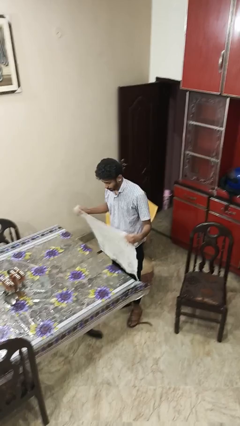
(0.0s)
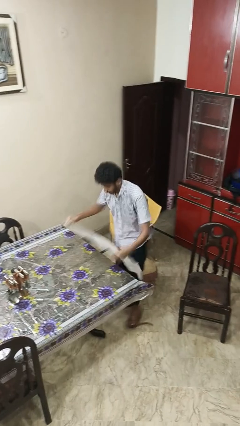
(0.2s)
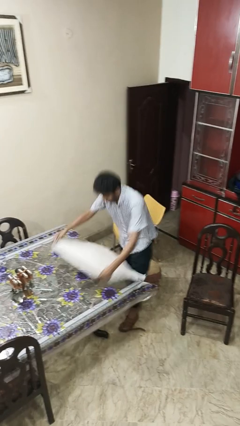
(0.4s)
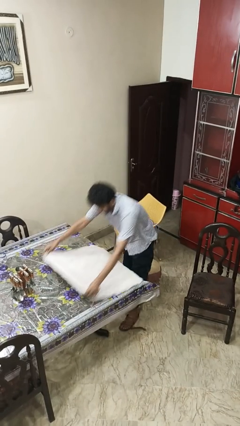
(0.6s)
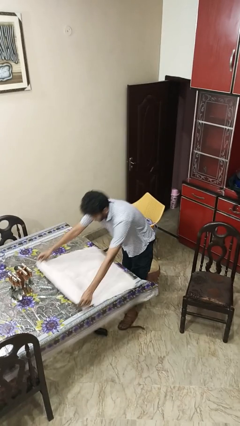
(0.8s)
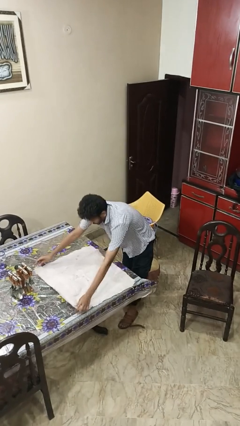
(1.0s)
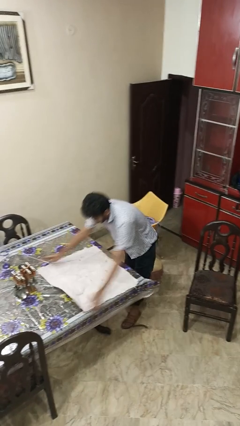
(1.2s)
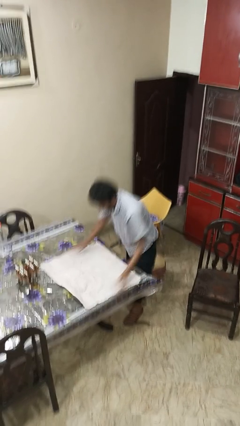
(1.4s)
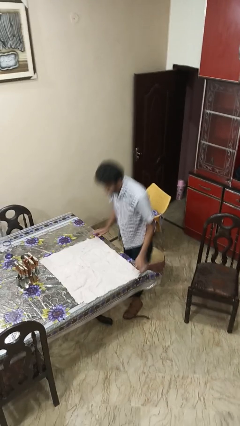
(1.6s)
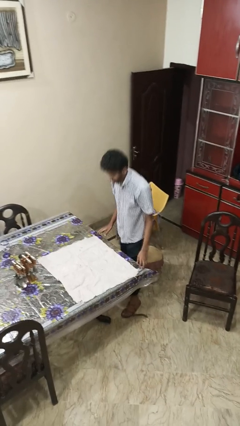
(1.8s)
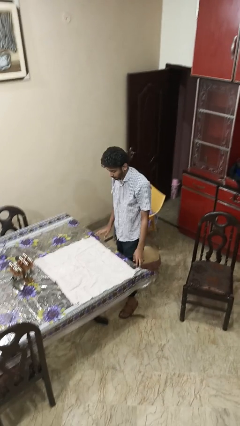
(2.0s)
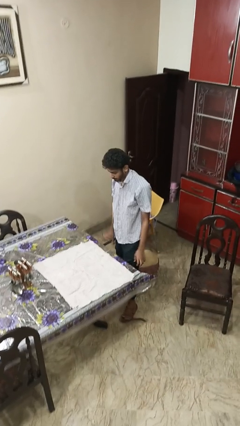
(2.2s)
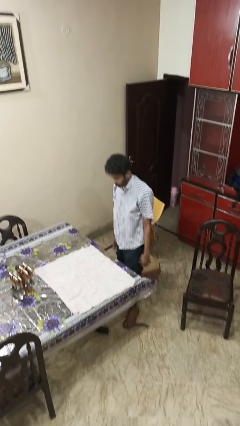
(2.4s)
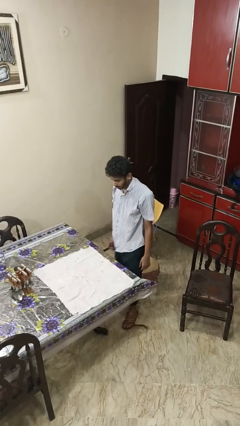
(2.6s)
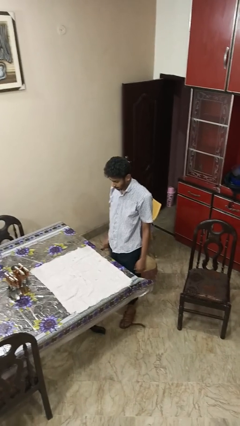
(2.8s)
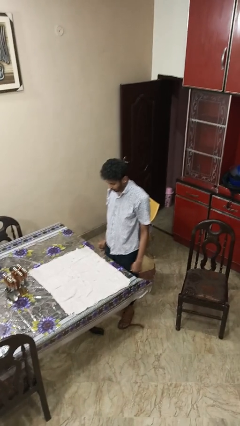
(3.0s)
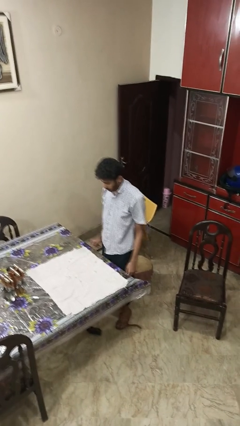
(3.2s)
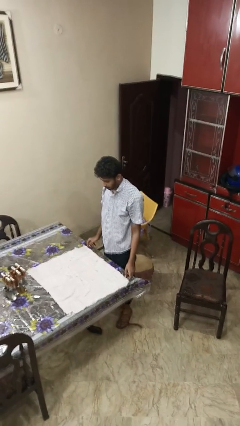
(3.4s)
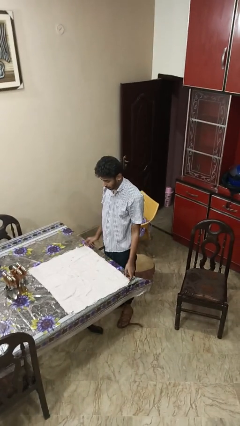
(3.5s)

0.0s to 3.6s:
person spreads tablecloth

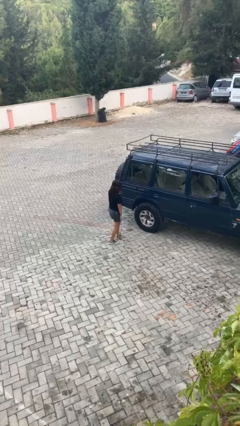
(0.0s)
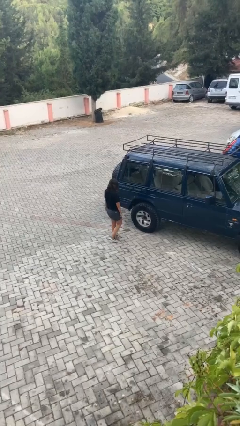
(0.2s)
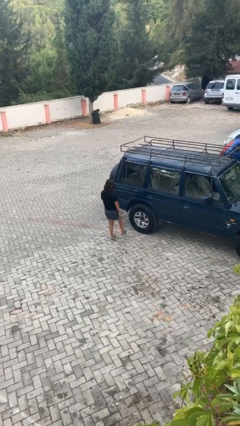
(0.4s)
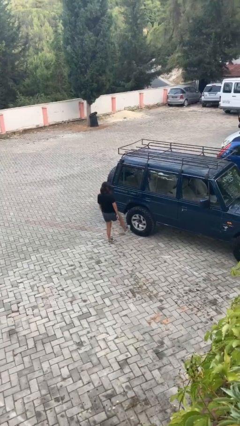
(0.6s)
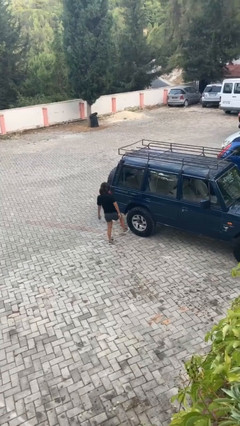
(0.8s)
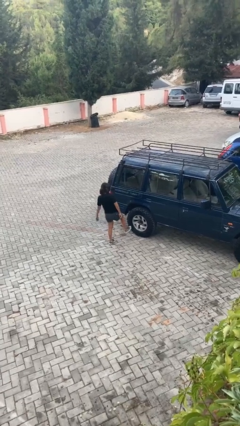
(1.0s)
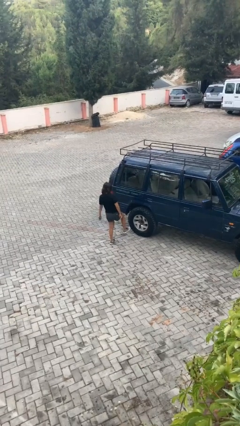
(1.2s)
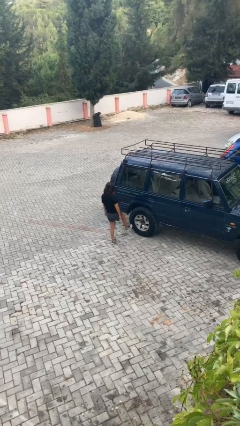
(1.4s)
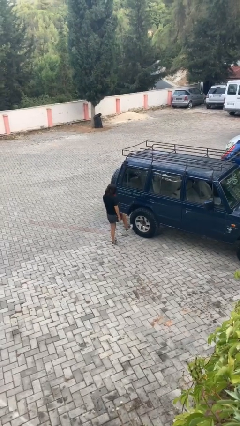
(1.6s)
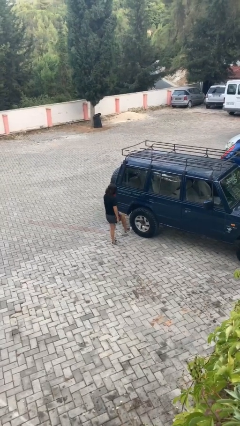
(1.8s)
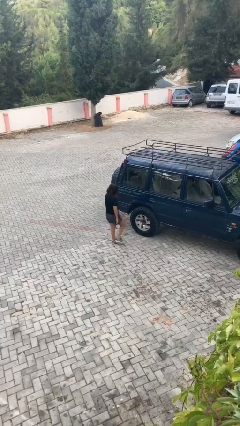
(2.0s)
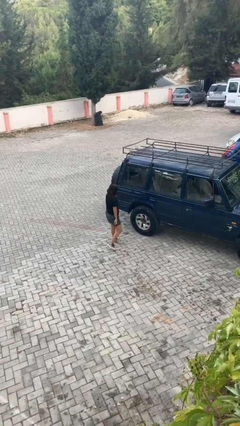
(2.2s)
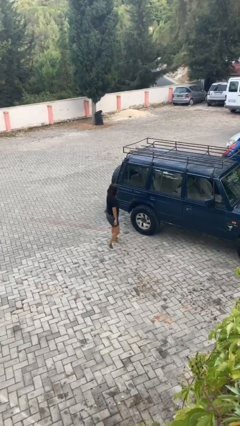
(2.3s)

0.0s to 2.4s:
person kicks car tires

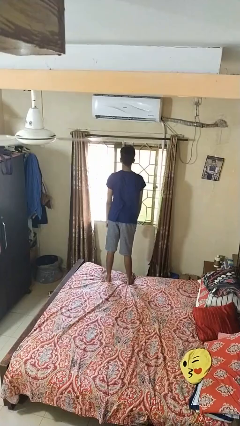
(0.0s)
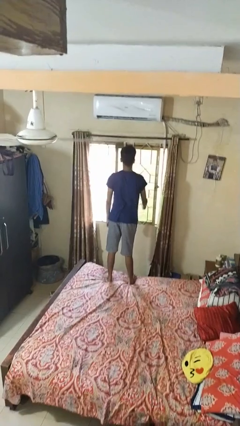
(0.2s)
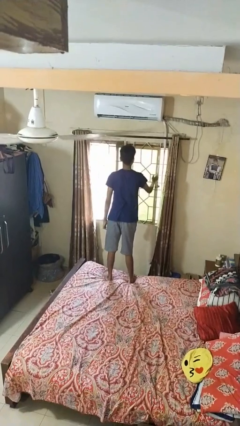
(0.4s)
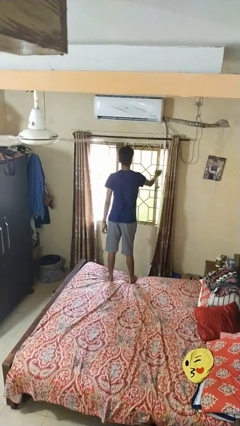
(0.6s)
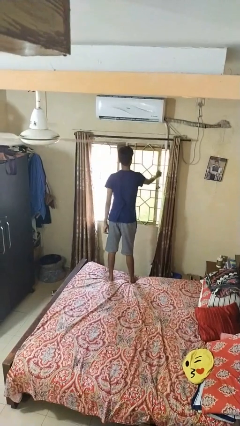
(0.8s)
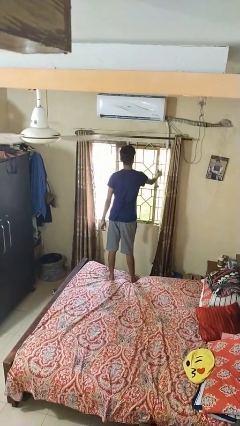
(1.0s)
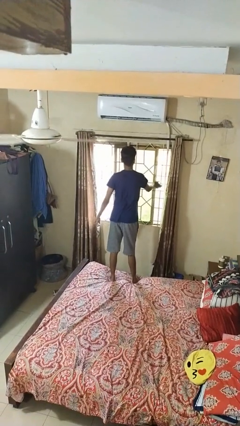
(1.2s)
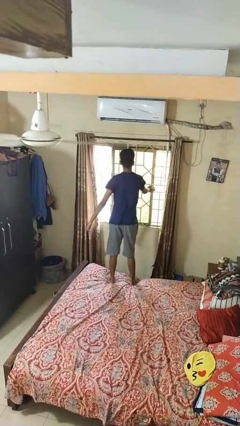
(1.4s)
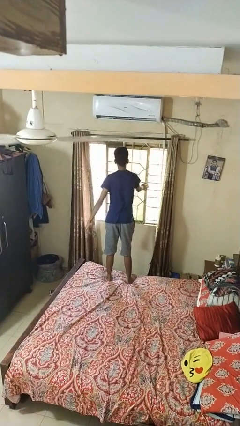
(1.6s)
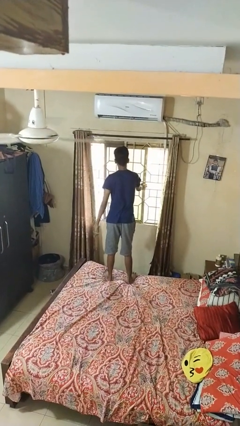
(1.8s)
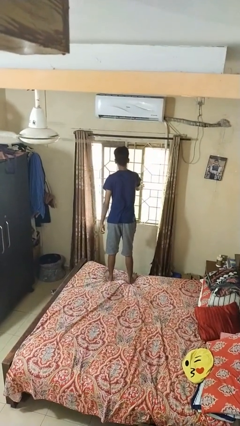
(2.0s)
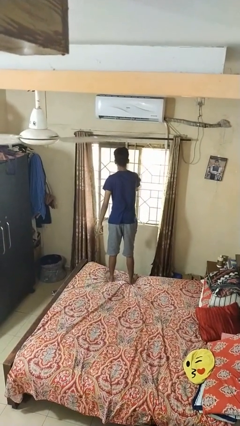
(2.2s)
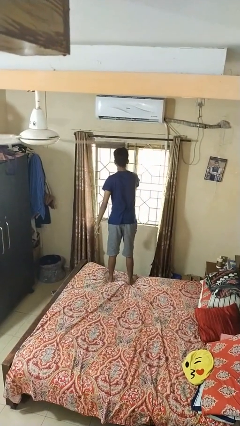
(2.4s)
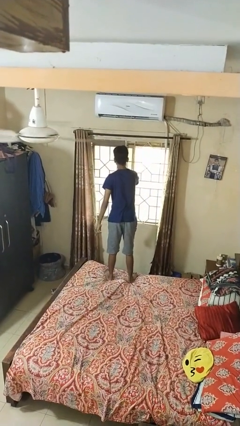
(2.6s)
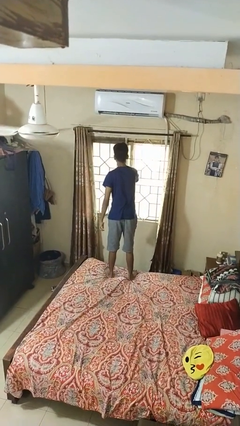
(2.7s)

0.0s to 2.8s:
person closes home window

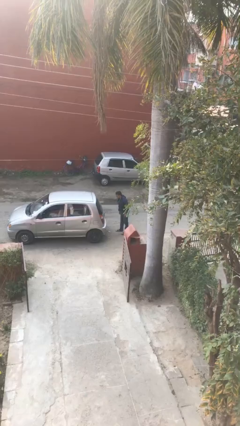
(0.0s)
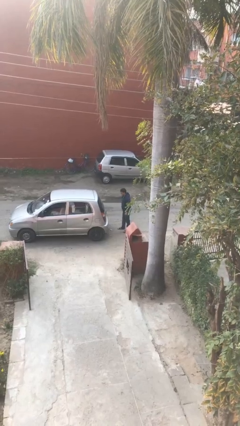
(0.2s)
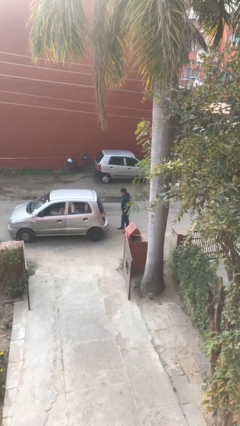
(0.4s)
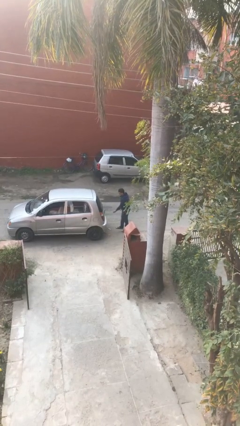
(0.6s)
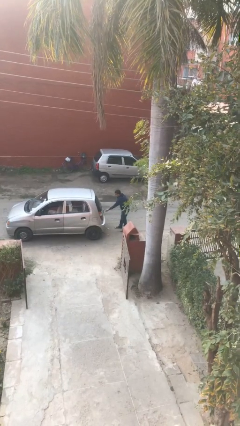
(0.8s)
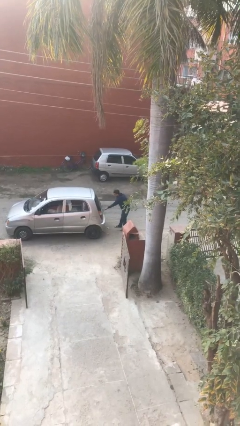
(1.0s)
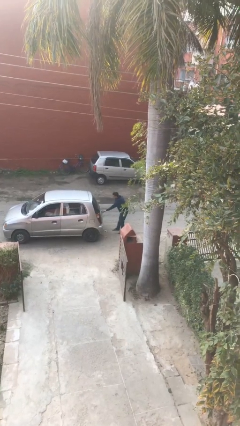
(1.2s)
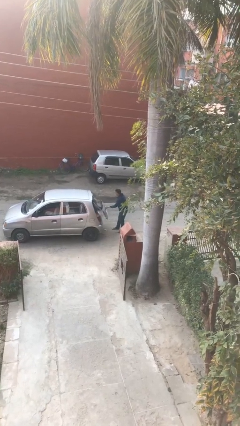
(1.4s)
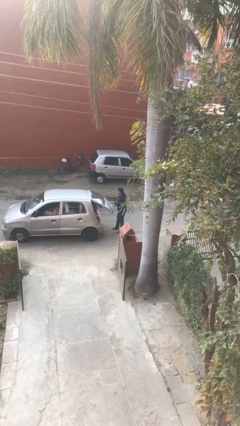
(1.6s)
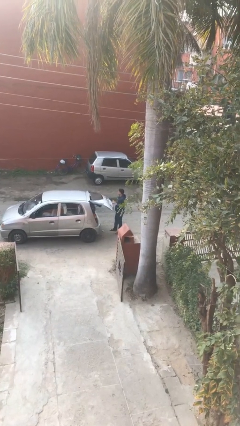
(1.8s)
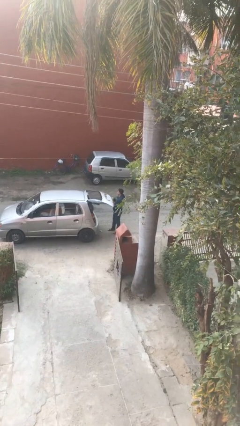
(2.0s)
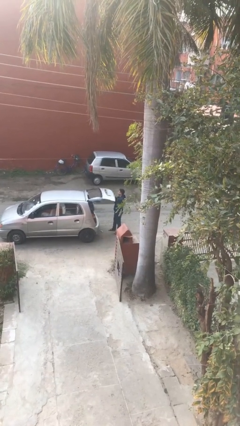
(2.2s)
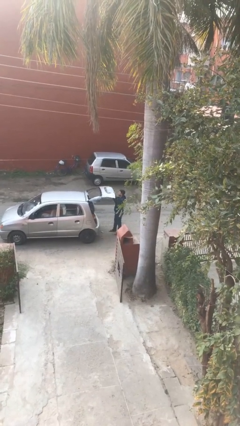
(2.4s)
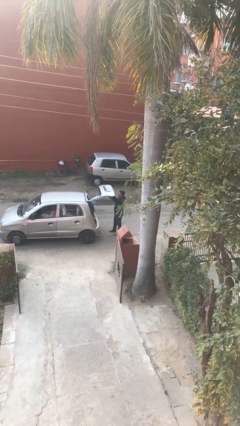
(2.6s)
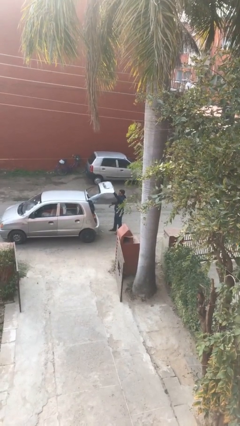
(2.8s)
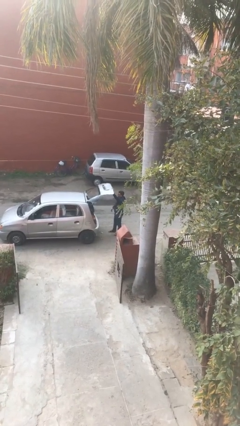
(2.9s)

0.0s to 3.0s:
person opens car trunk

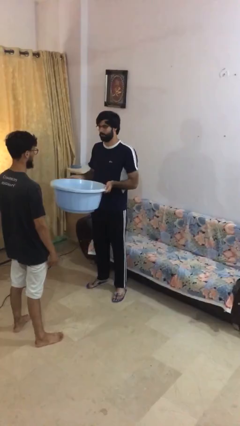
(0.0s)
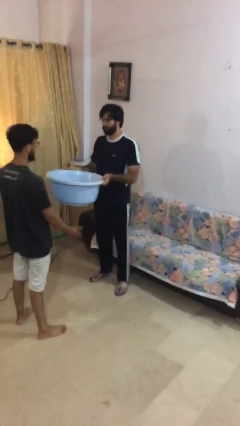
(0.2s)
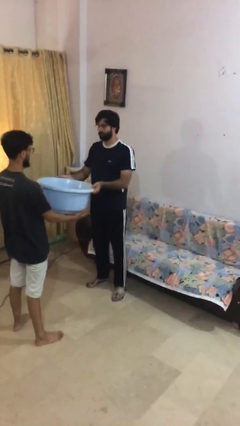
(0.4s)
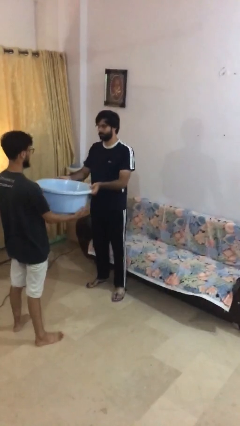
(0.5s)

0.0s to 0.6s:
person transfers object to person

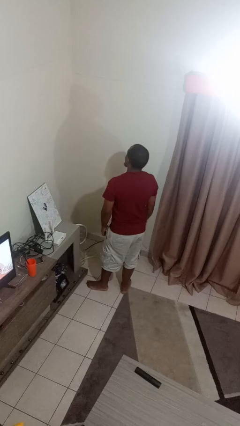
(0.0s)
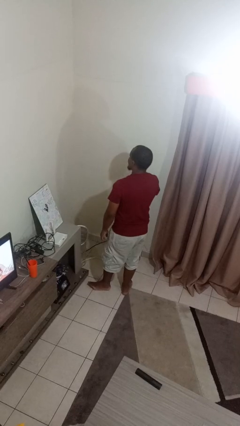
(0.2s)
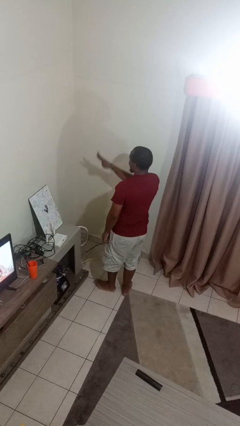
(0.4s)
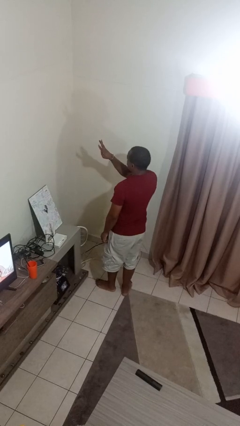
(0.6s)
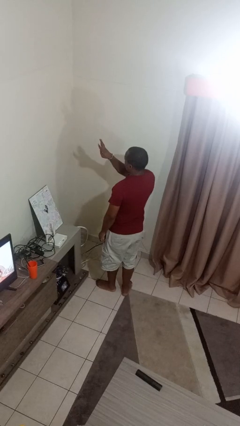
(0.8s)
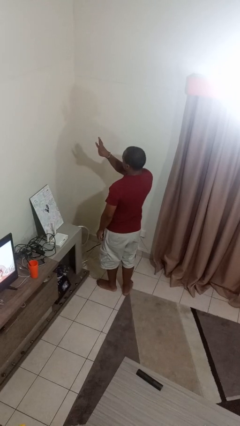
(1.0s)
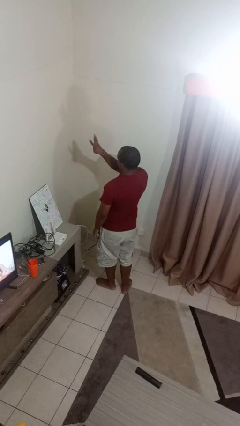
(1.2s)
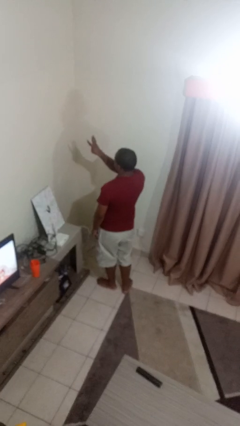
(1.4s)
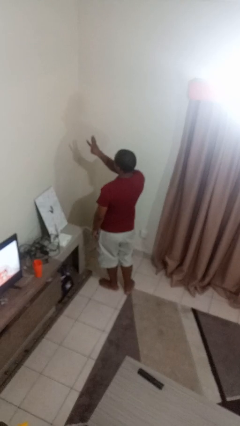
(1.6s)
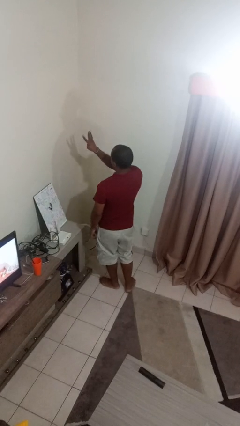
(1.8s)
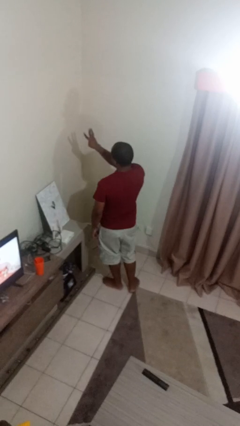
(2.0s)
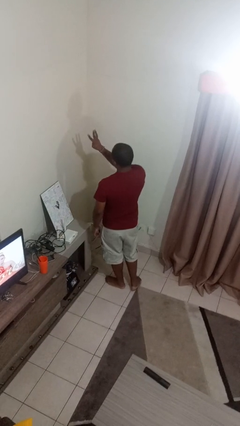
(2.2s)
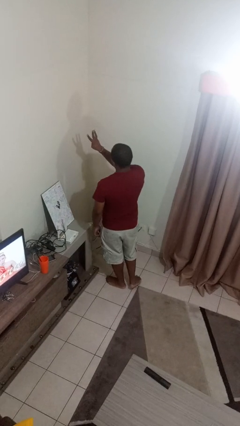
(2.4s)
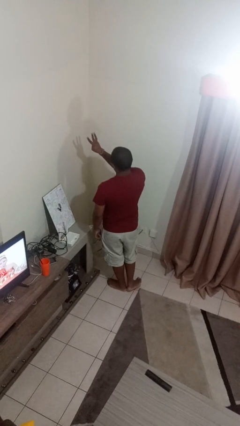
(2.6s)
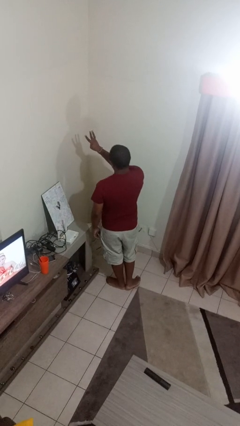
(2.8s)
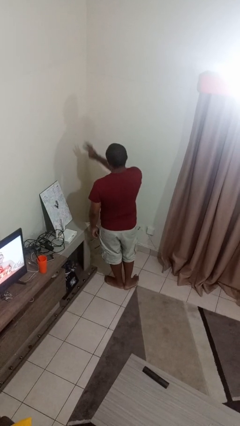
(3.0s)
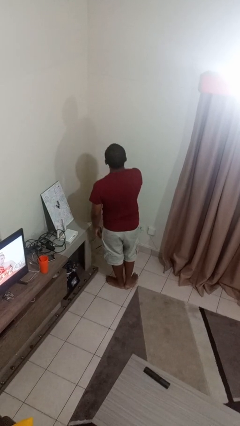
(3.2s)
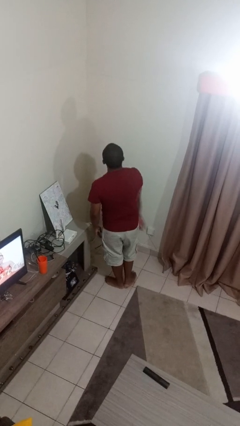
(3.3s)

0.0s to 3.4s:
person gestures number three

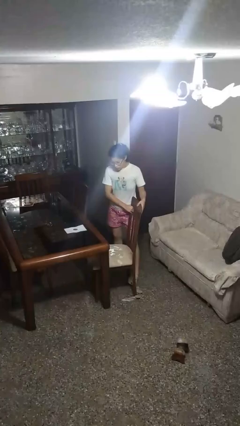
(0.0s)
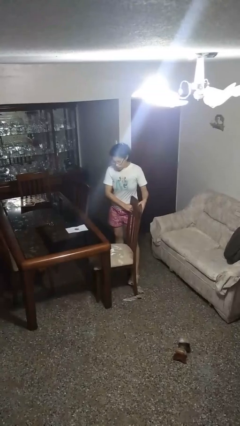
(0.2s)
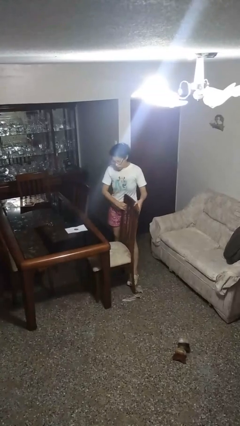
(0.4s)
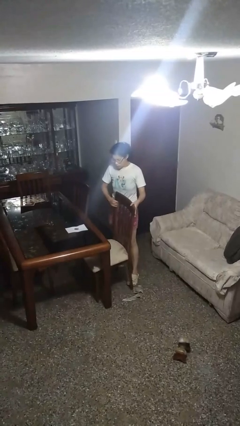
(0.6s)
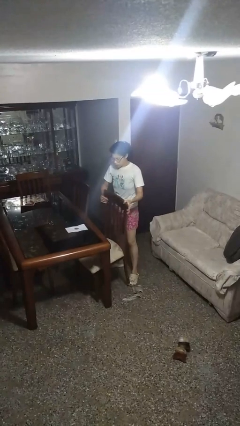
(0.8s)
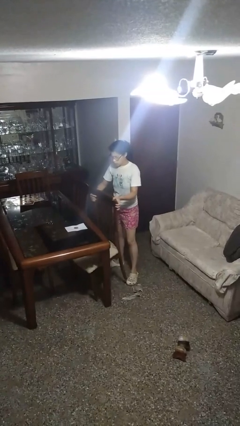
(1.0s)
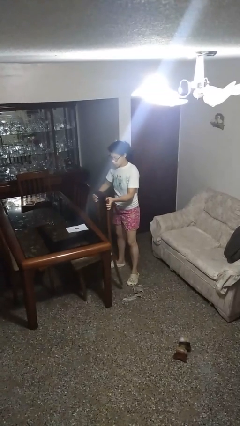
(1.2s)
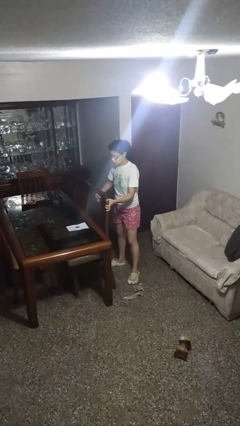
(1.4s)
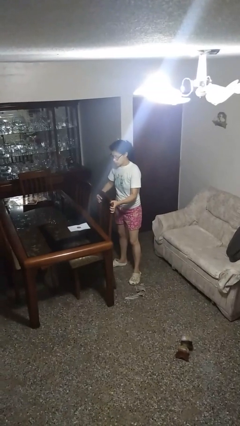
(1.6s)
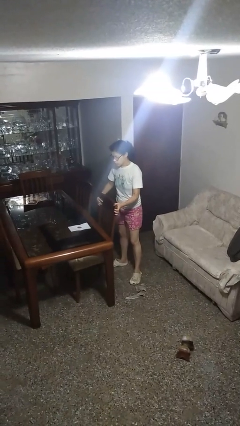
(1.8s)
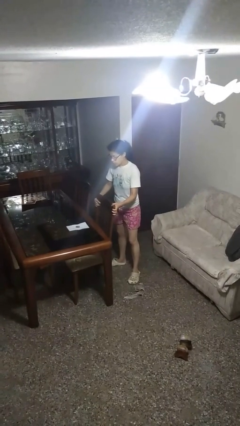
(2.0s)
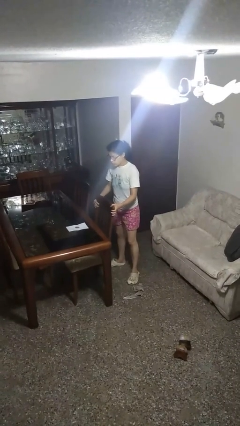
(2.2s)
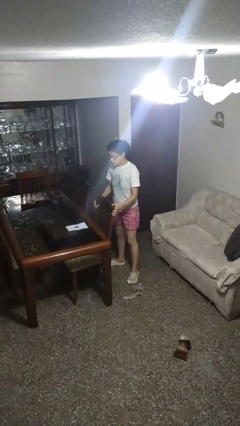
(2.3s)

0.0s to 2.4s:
person pushes in chair
